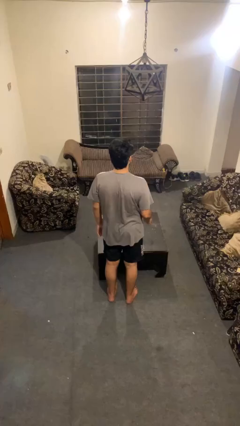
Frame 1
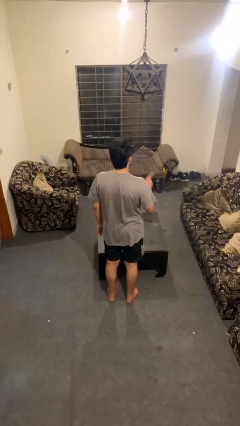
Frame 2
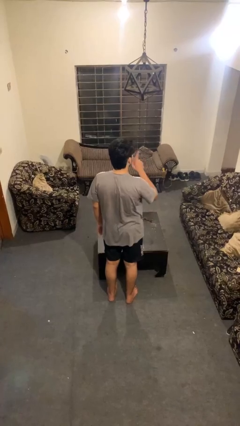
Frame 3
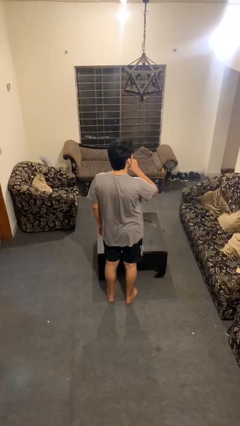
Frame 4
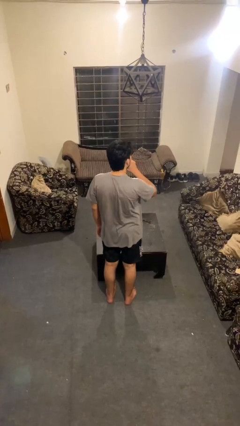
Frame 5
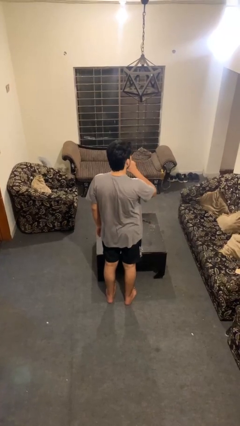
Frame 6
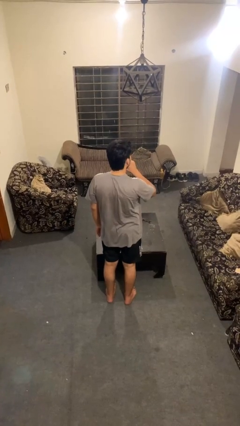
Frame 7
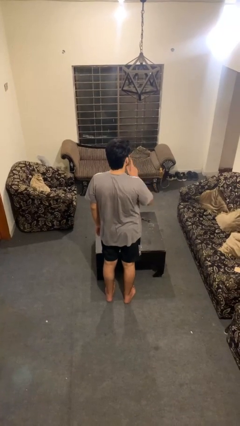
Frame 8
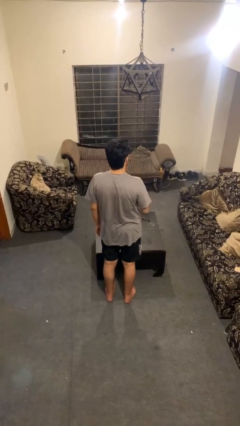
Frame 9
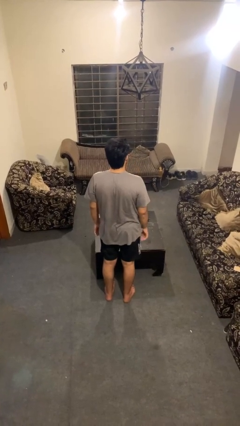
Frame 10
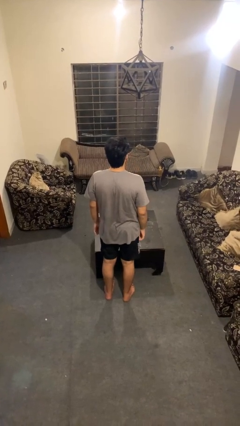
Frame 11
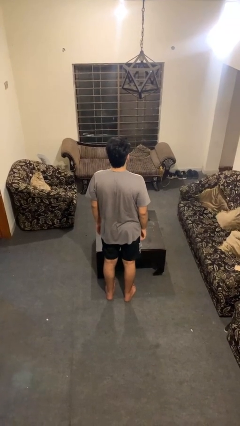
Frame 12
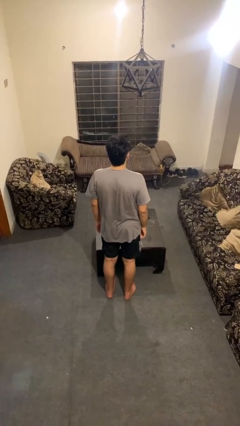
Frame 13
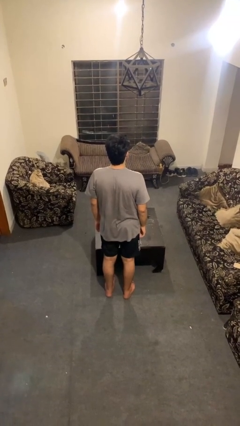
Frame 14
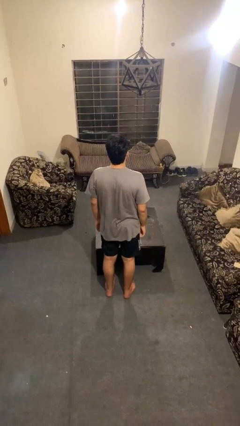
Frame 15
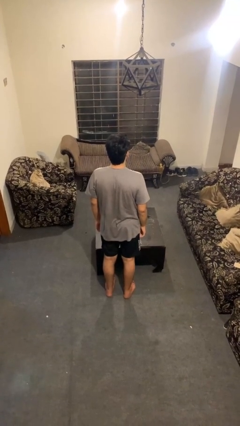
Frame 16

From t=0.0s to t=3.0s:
person gestures be quiet

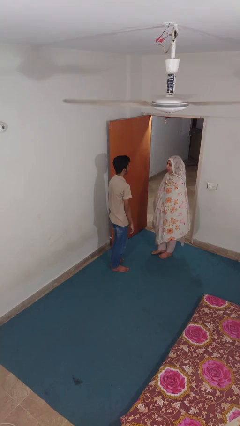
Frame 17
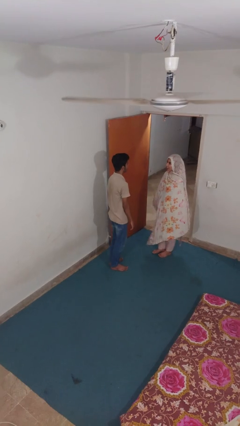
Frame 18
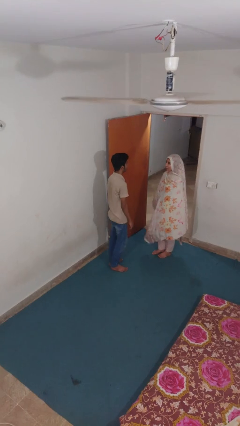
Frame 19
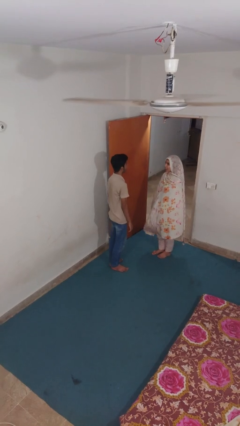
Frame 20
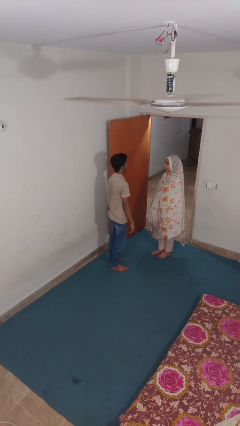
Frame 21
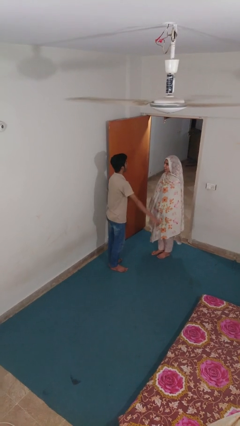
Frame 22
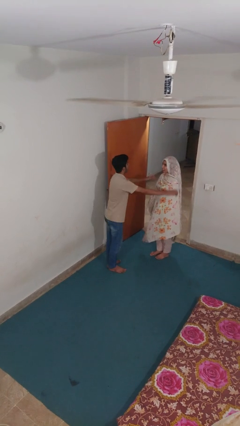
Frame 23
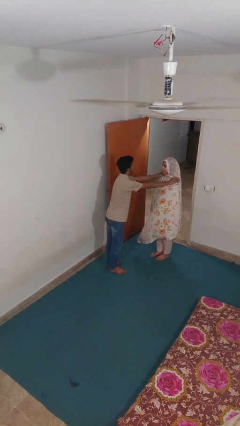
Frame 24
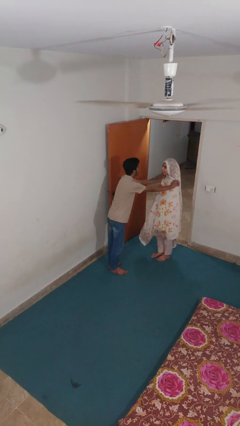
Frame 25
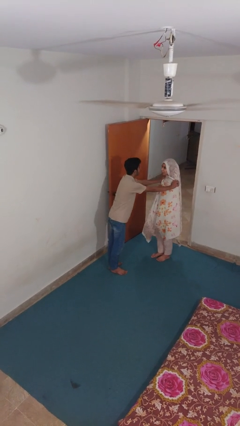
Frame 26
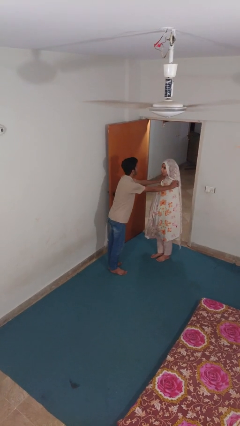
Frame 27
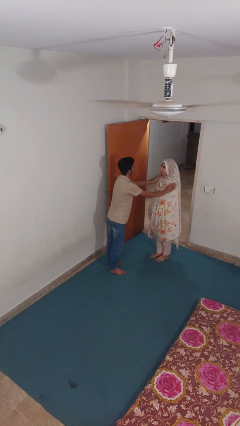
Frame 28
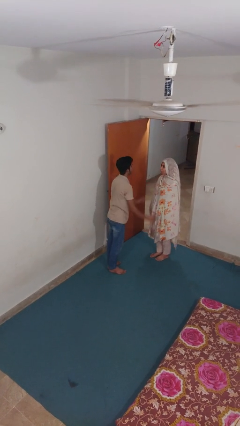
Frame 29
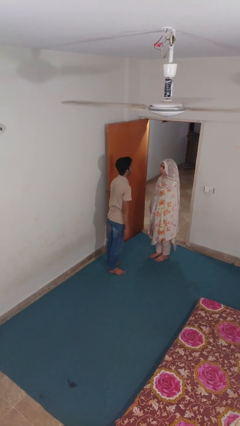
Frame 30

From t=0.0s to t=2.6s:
person pounds shoulders of person

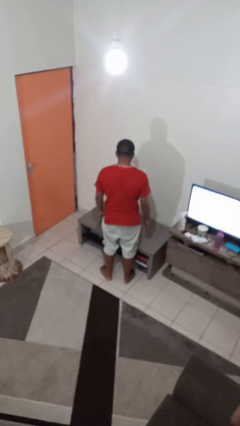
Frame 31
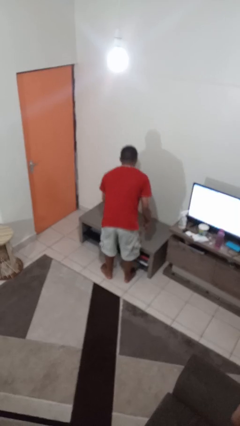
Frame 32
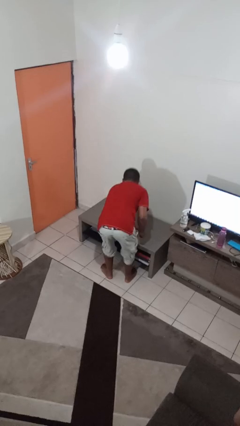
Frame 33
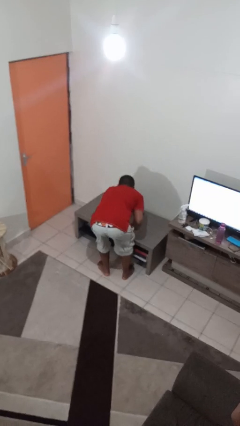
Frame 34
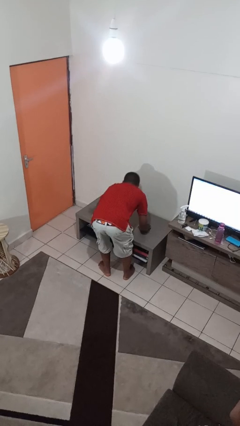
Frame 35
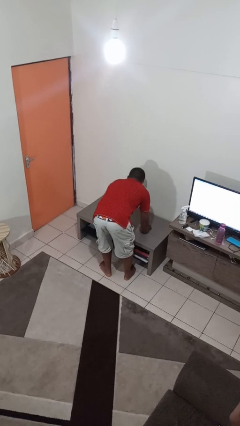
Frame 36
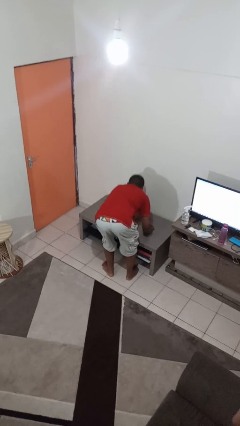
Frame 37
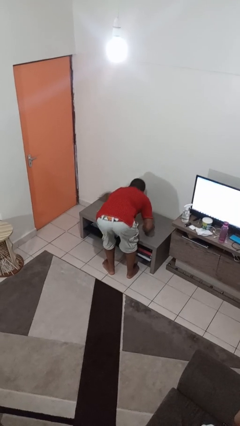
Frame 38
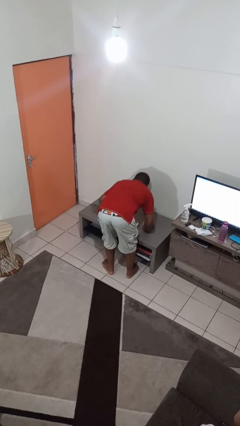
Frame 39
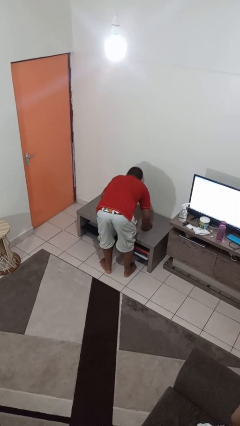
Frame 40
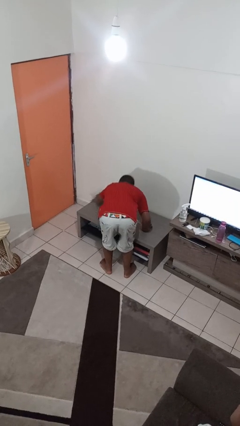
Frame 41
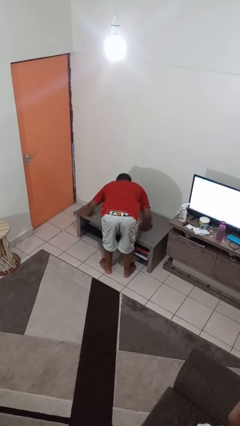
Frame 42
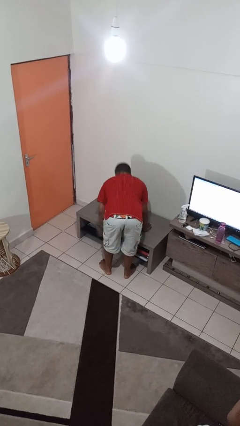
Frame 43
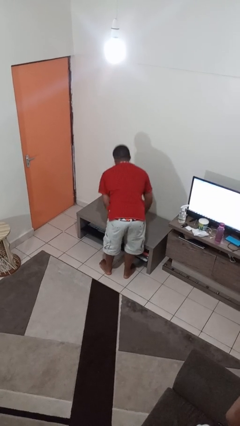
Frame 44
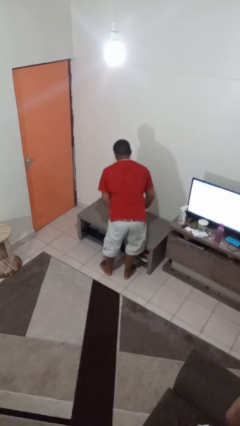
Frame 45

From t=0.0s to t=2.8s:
person cleans table with rag

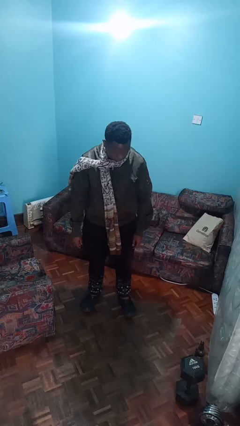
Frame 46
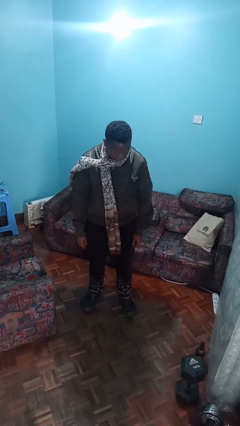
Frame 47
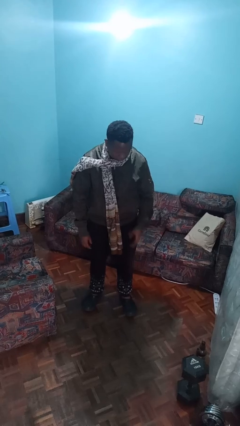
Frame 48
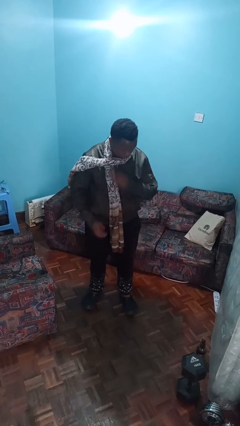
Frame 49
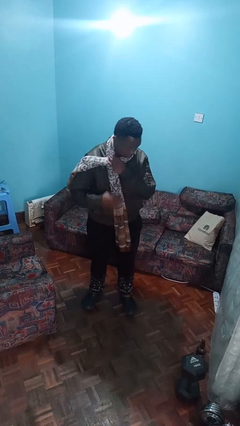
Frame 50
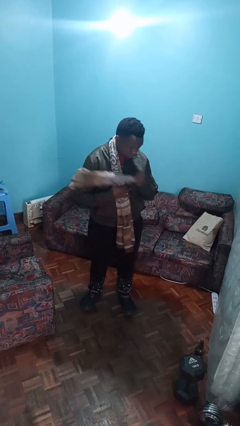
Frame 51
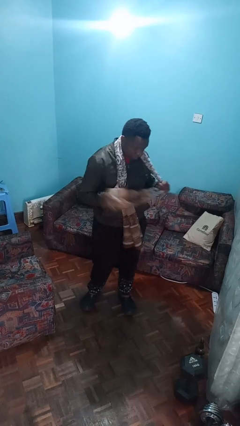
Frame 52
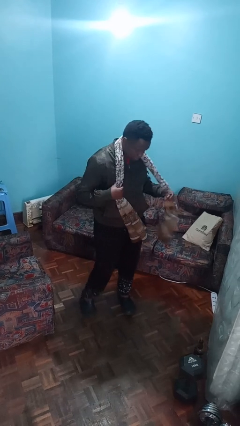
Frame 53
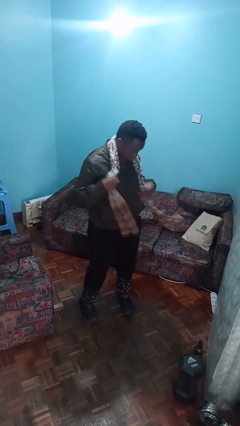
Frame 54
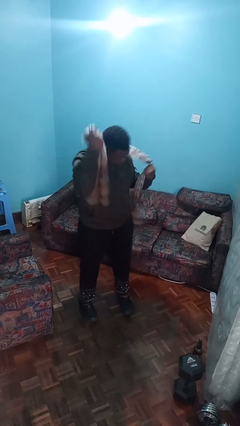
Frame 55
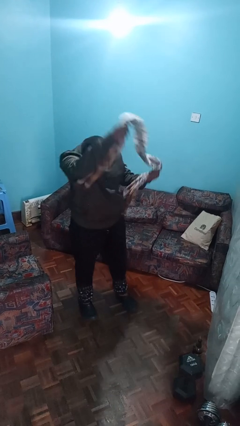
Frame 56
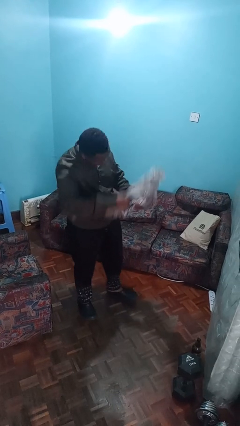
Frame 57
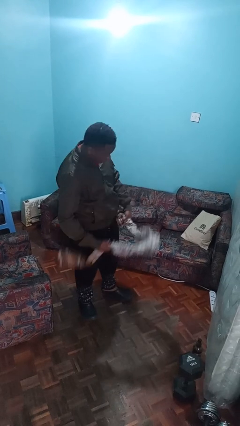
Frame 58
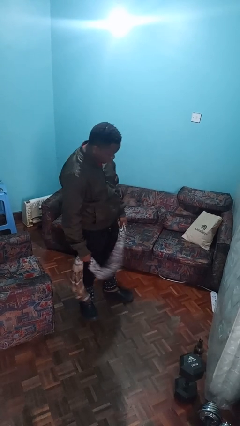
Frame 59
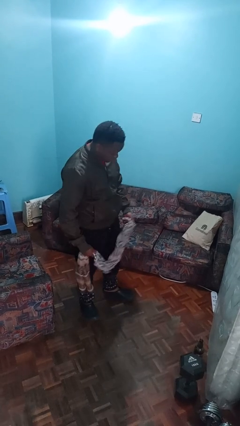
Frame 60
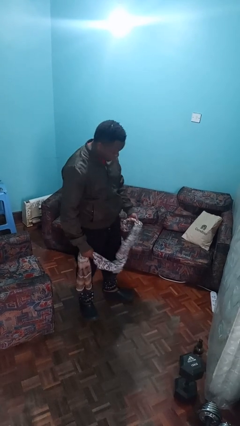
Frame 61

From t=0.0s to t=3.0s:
person takes off scarf

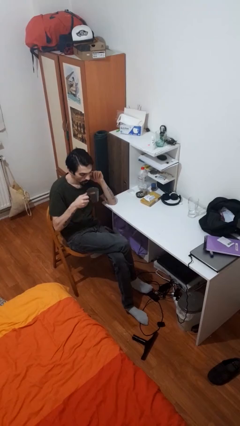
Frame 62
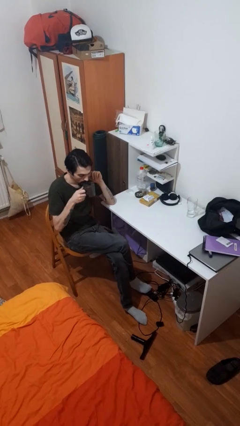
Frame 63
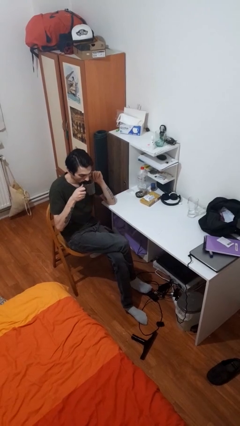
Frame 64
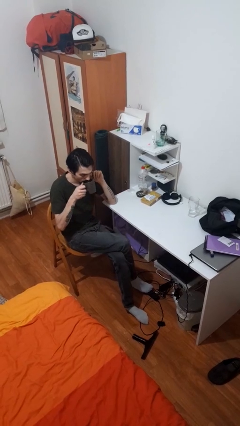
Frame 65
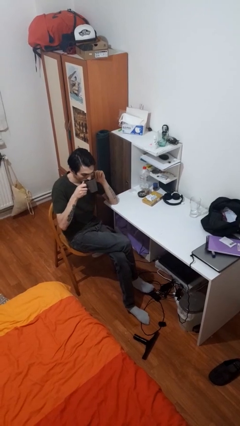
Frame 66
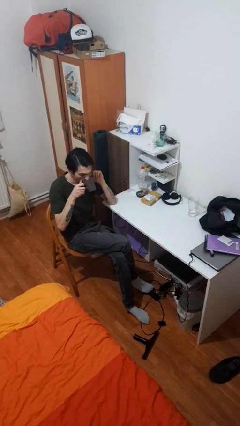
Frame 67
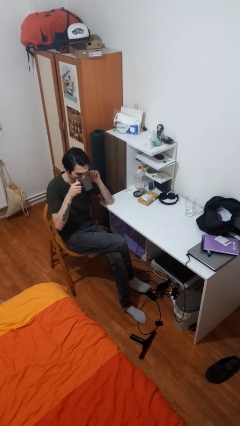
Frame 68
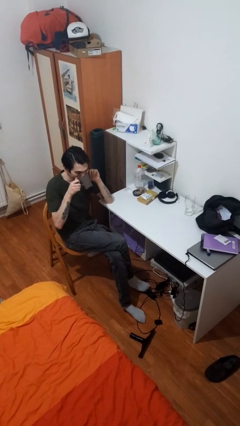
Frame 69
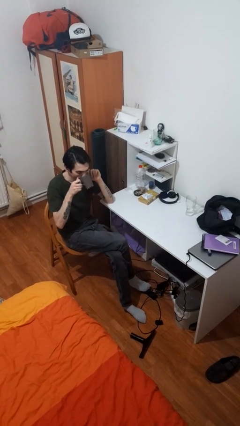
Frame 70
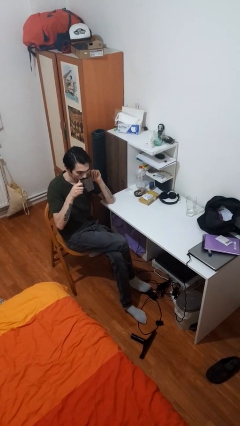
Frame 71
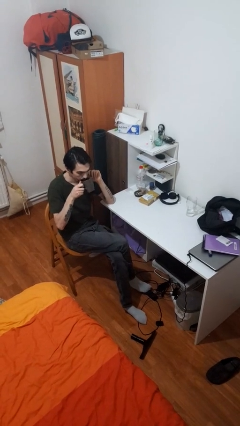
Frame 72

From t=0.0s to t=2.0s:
person drinks from mug

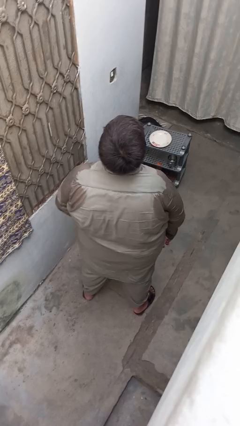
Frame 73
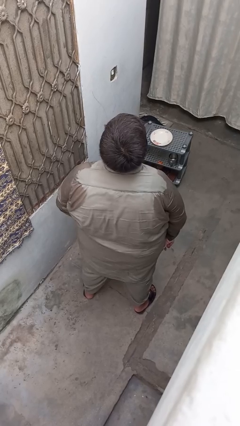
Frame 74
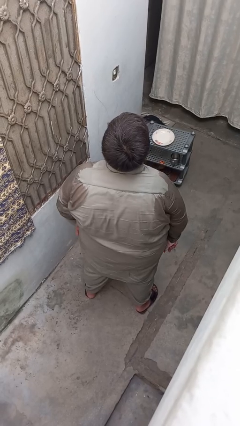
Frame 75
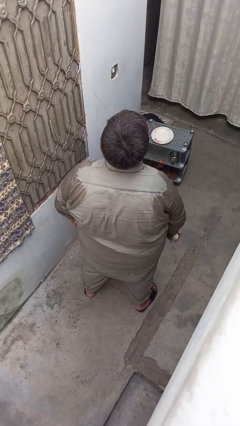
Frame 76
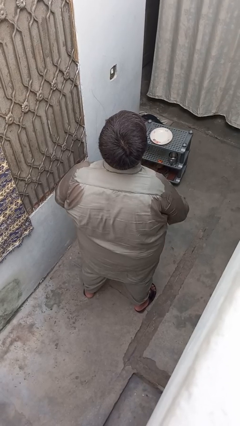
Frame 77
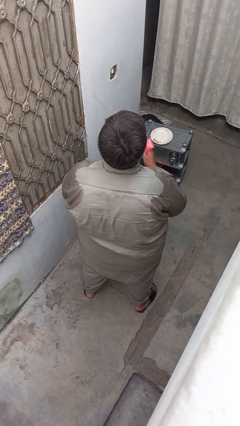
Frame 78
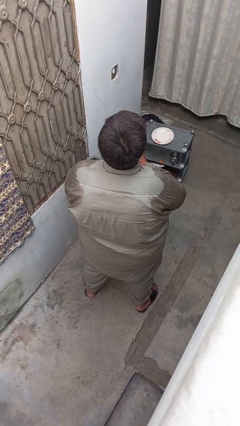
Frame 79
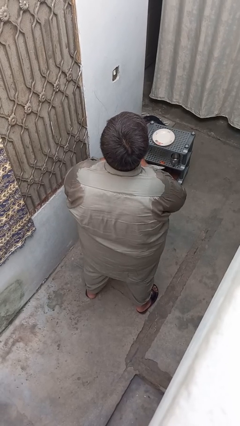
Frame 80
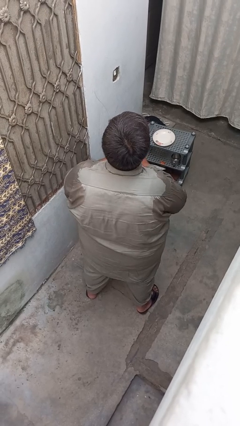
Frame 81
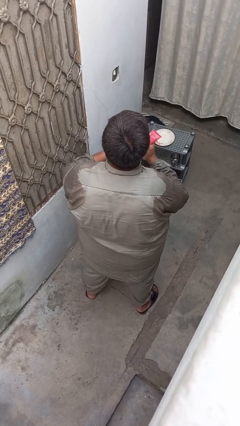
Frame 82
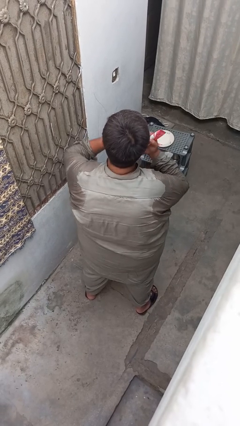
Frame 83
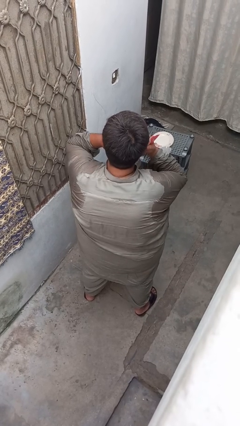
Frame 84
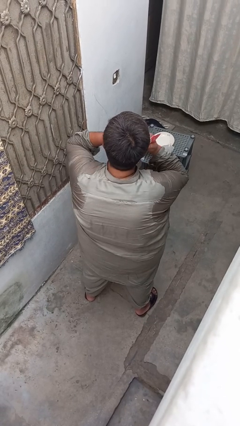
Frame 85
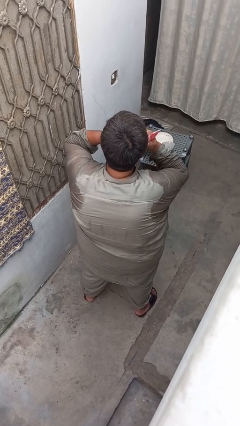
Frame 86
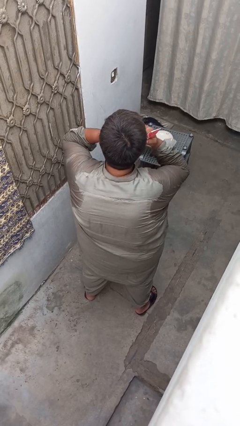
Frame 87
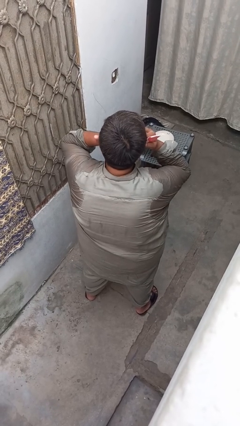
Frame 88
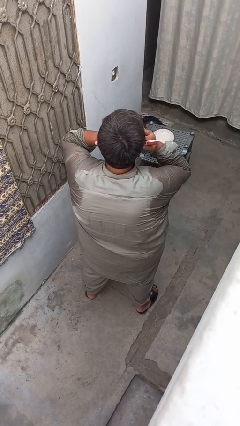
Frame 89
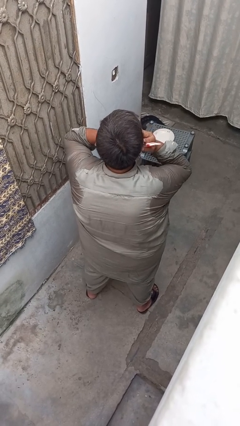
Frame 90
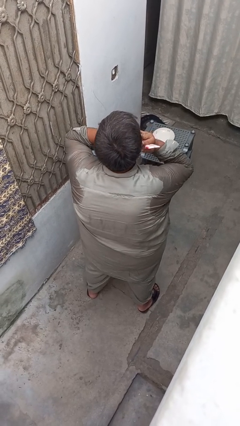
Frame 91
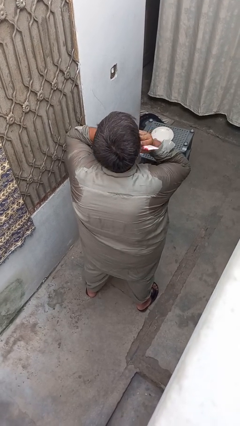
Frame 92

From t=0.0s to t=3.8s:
person applies facial moisturizer
